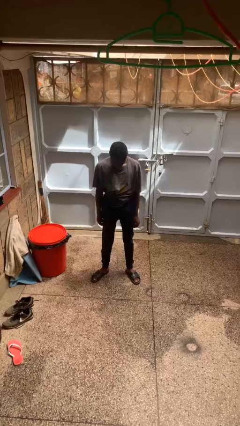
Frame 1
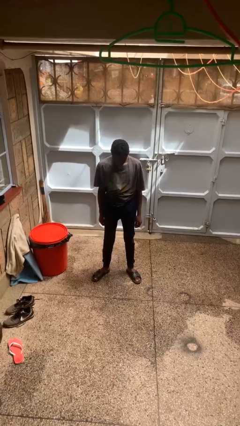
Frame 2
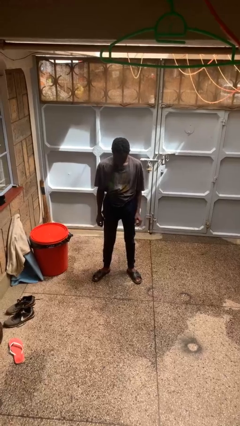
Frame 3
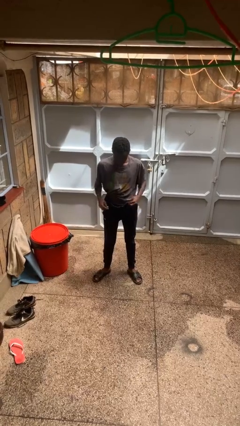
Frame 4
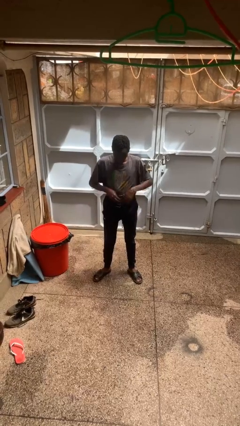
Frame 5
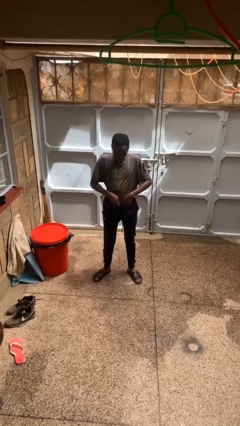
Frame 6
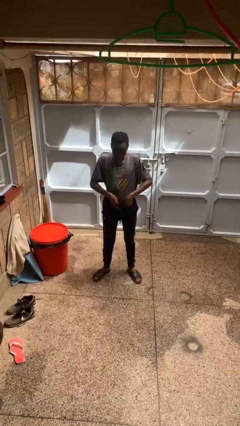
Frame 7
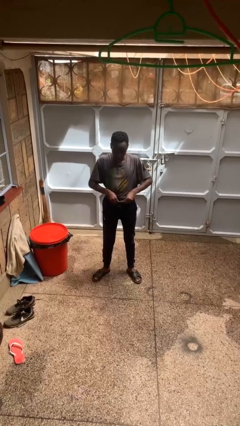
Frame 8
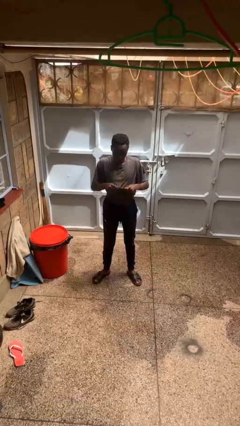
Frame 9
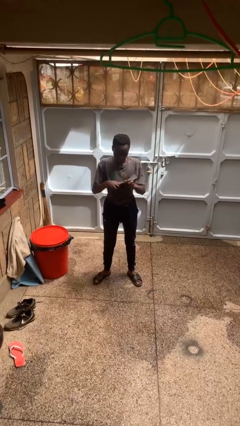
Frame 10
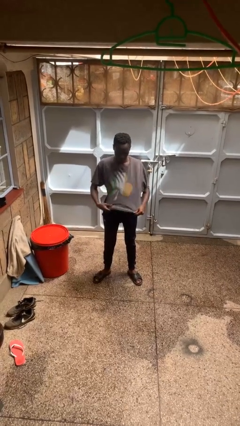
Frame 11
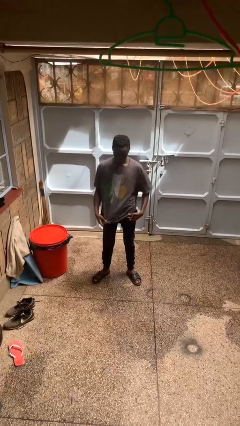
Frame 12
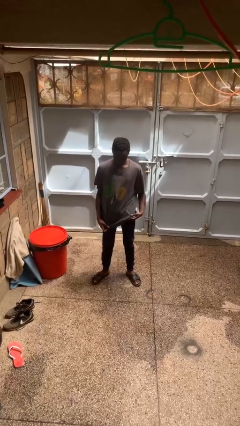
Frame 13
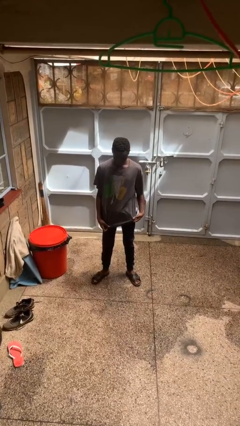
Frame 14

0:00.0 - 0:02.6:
person untucks shirt

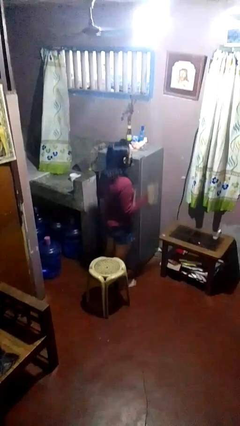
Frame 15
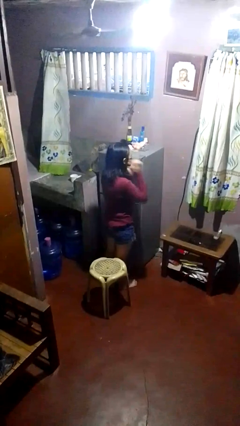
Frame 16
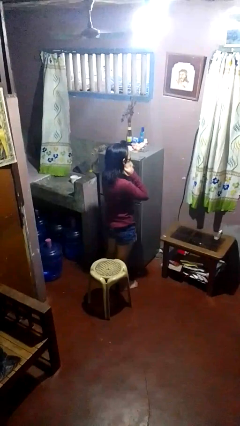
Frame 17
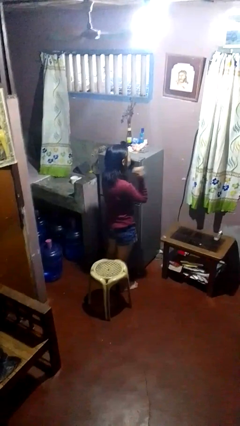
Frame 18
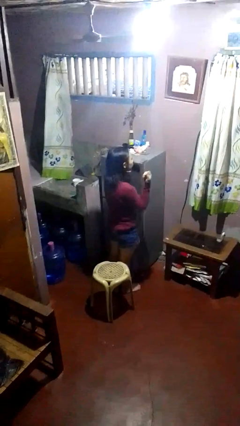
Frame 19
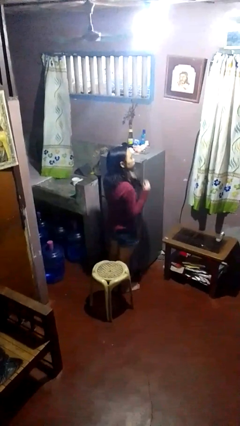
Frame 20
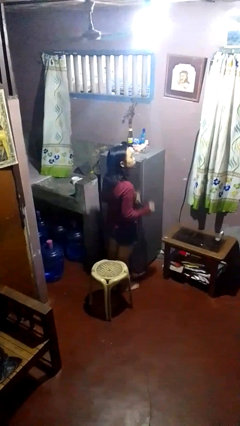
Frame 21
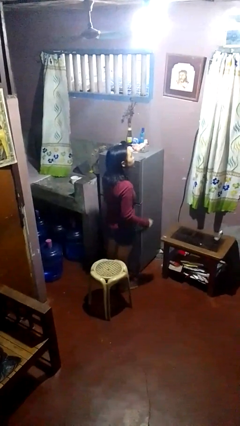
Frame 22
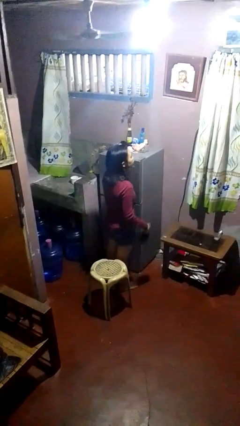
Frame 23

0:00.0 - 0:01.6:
person takes off facemask

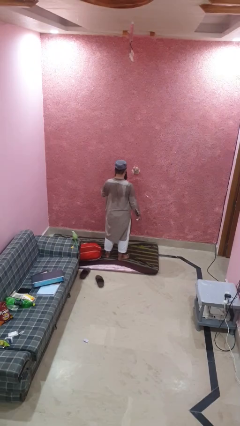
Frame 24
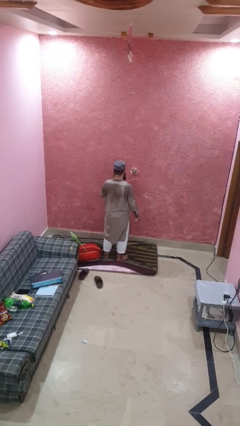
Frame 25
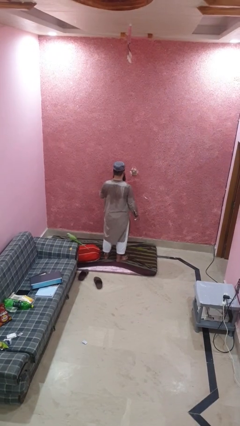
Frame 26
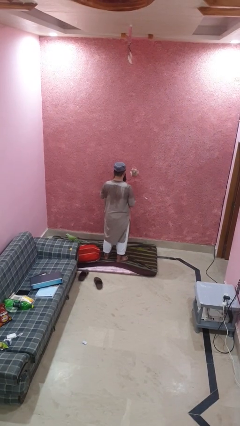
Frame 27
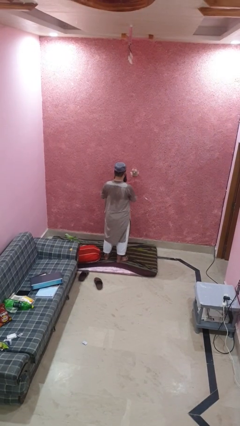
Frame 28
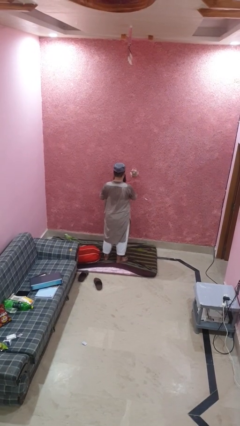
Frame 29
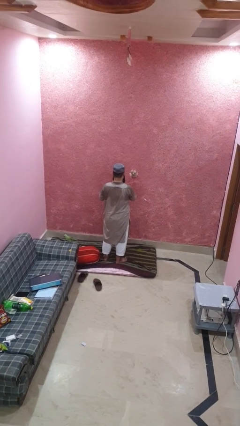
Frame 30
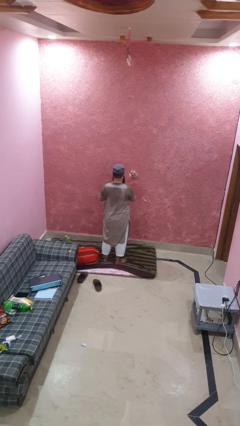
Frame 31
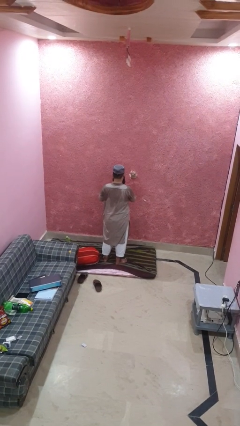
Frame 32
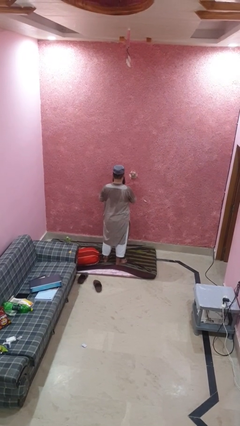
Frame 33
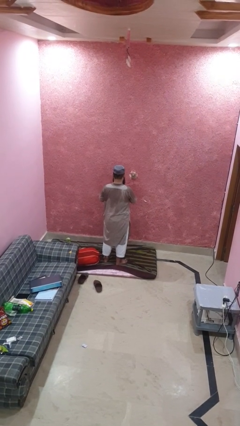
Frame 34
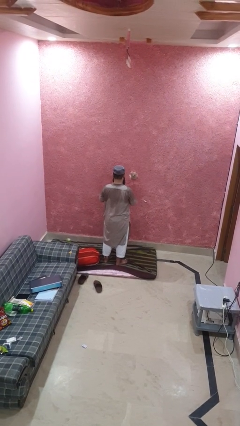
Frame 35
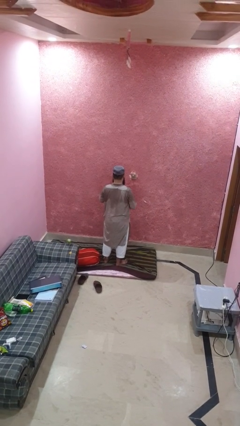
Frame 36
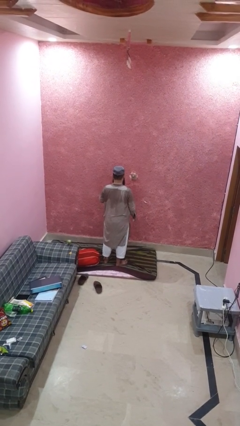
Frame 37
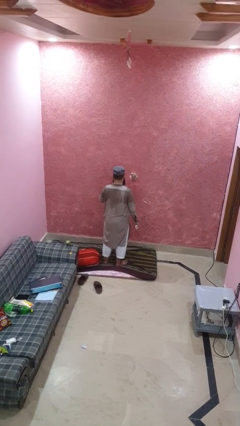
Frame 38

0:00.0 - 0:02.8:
person wipes mouth with napkin

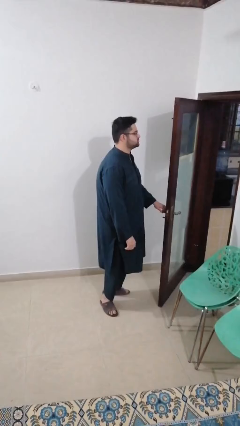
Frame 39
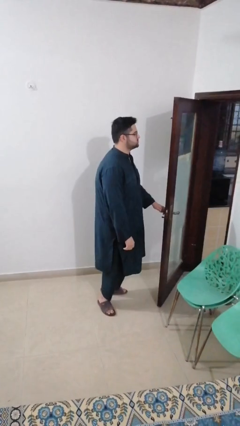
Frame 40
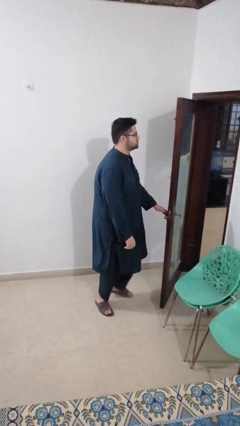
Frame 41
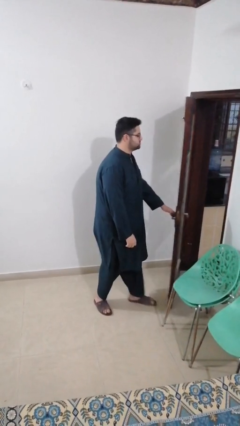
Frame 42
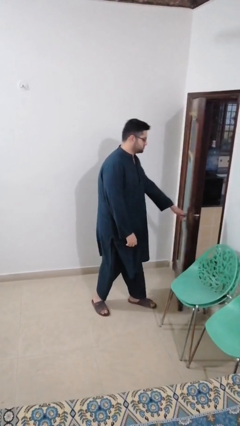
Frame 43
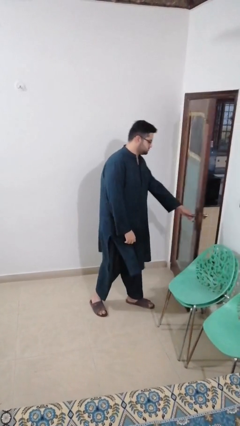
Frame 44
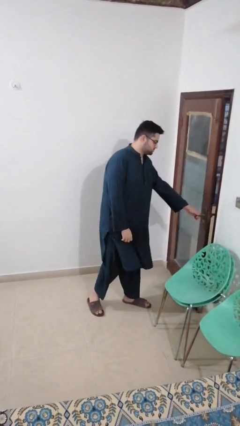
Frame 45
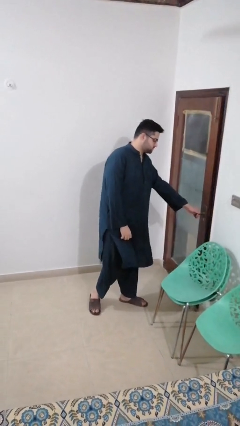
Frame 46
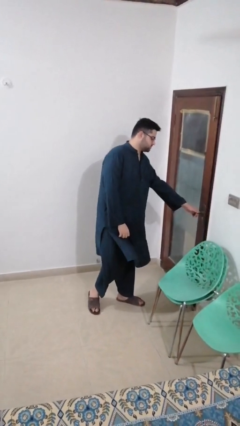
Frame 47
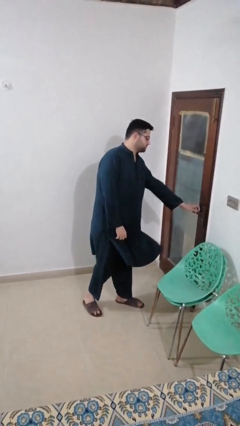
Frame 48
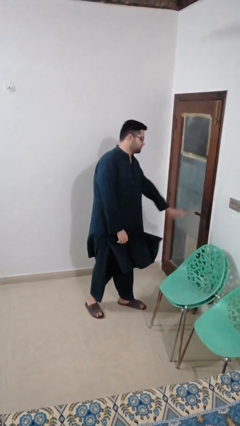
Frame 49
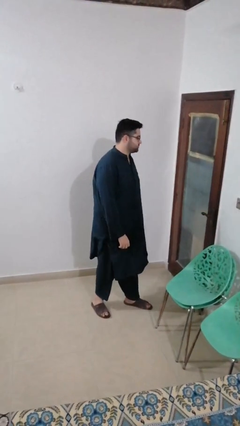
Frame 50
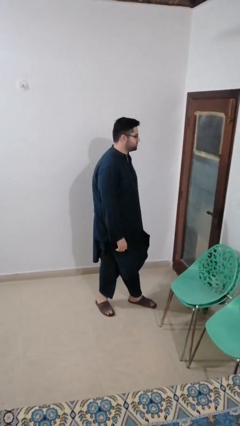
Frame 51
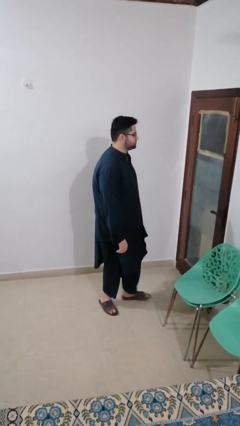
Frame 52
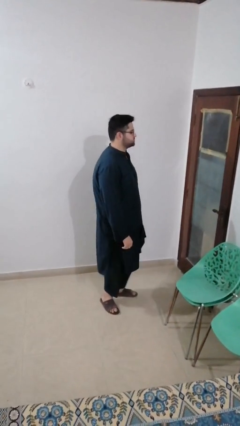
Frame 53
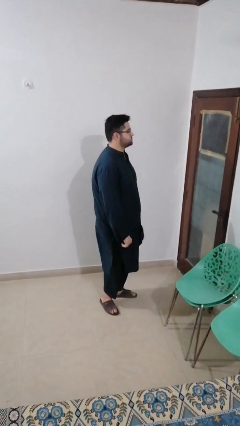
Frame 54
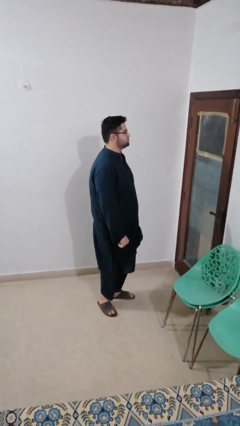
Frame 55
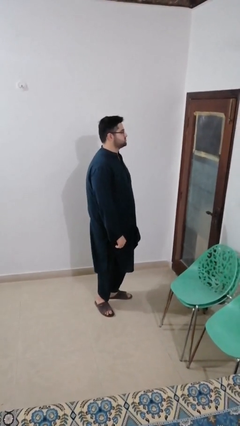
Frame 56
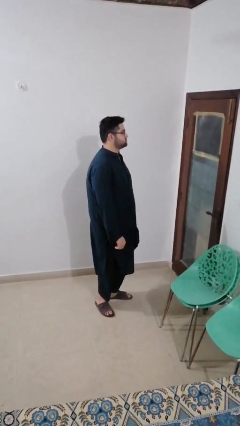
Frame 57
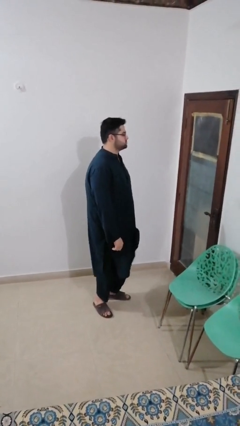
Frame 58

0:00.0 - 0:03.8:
person closes facility door

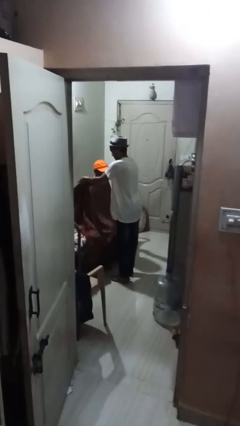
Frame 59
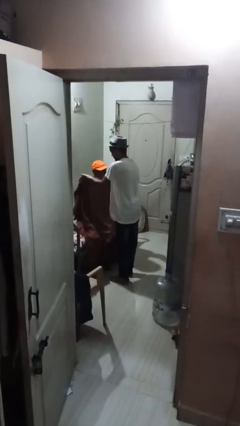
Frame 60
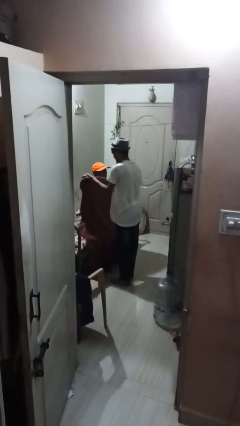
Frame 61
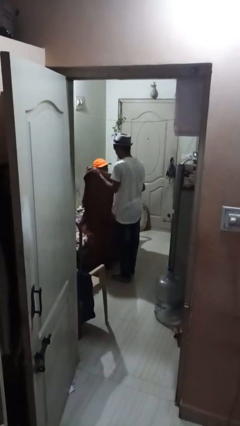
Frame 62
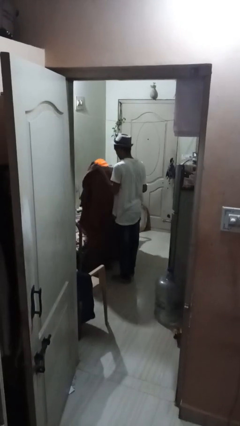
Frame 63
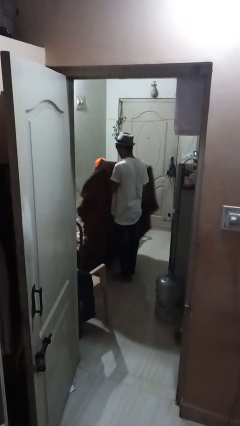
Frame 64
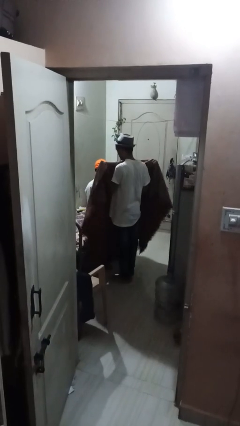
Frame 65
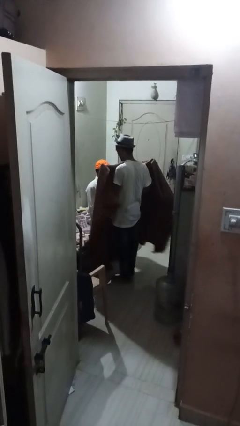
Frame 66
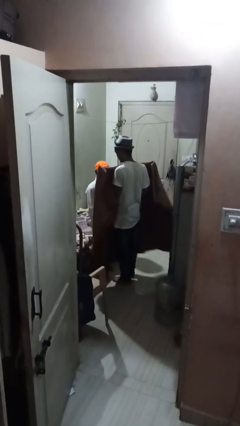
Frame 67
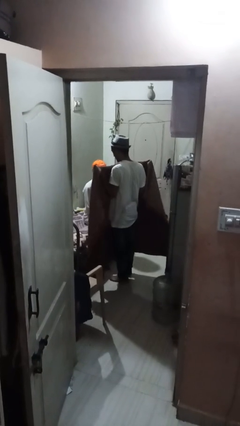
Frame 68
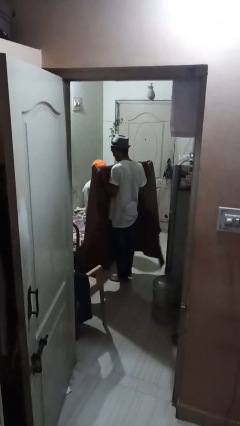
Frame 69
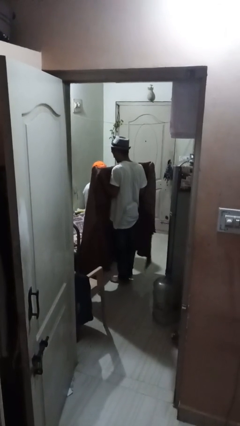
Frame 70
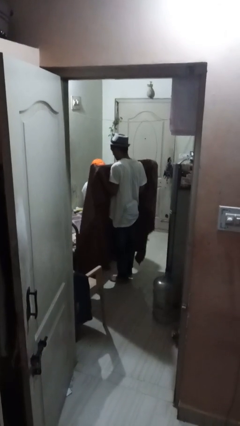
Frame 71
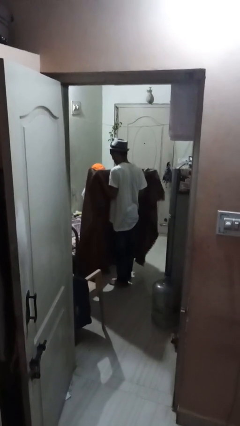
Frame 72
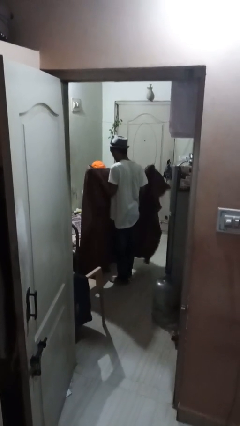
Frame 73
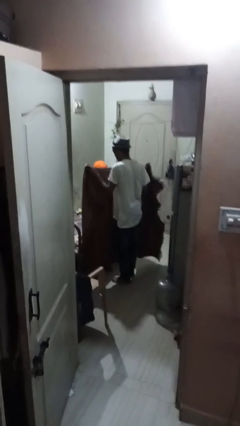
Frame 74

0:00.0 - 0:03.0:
person uncovers friend with blanket

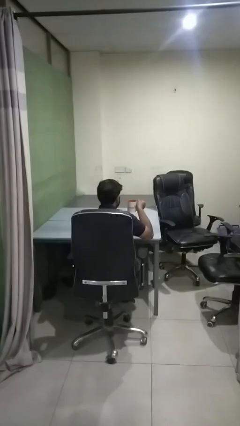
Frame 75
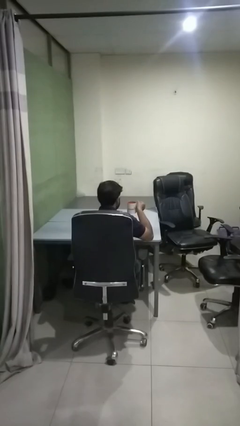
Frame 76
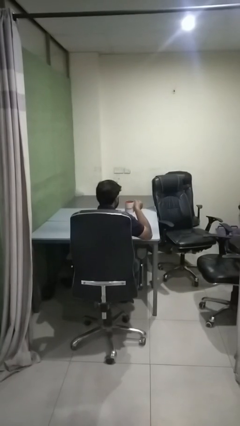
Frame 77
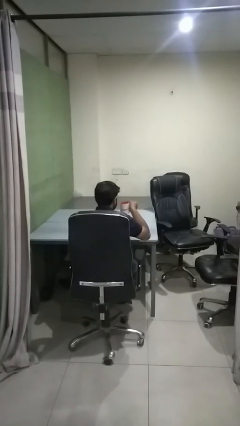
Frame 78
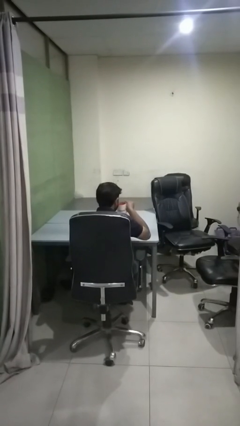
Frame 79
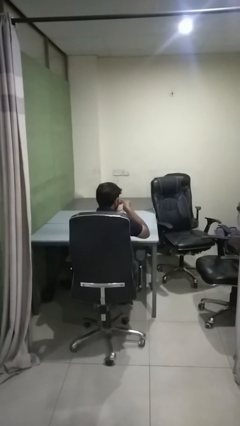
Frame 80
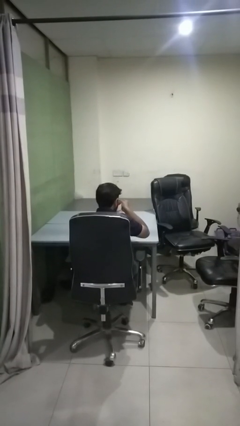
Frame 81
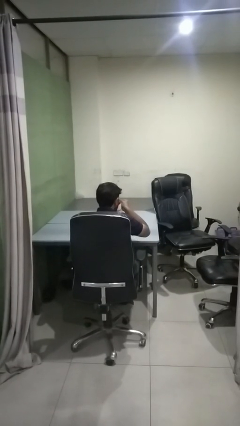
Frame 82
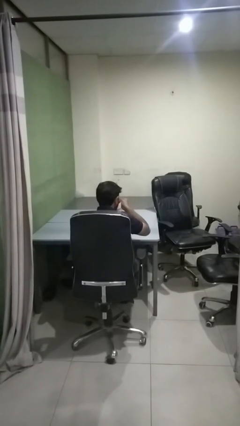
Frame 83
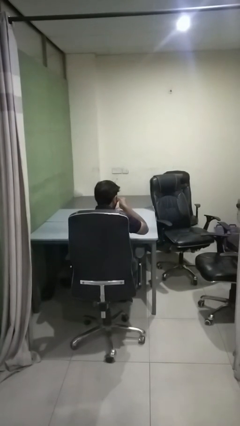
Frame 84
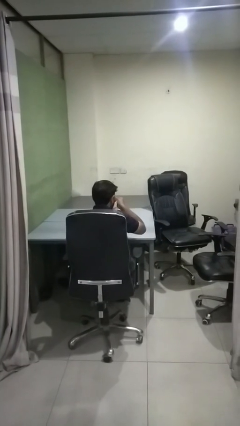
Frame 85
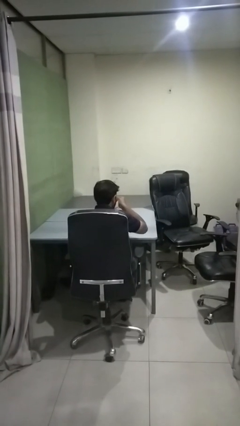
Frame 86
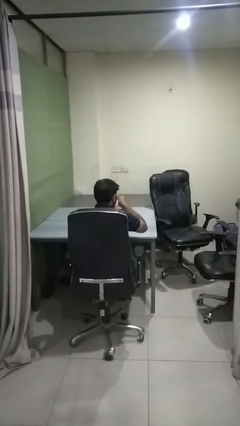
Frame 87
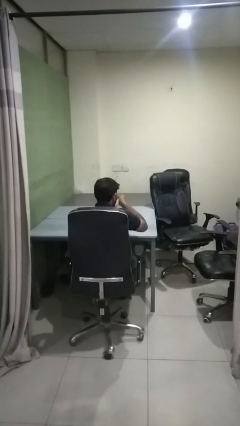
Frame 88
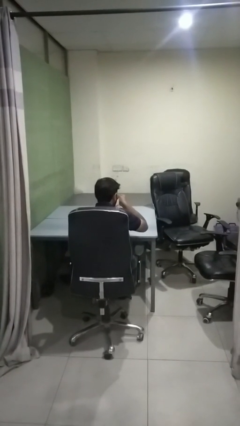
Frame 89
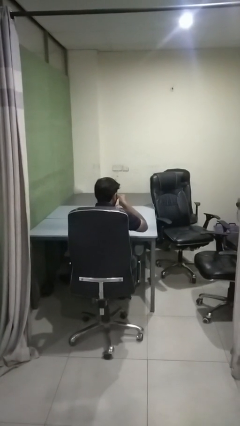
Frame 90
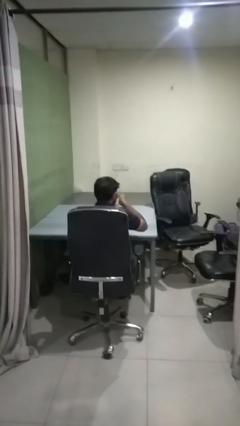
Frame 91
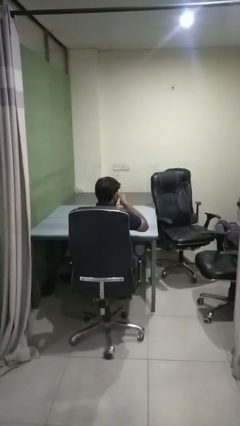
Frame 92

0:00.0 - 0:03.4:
person drinks from mug

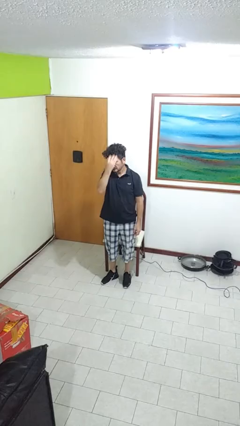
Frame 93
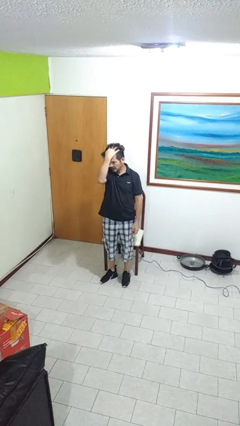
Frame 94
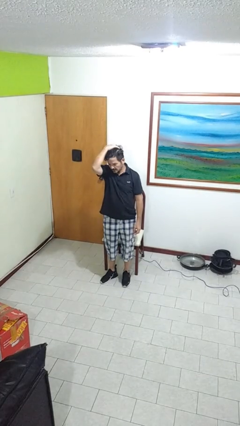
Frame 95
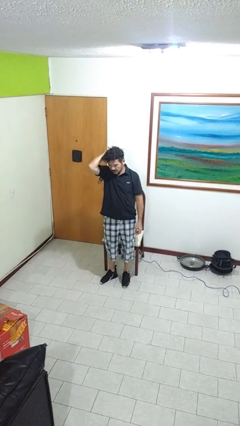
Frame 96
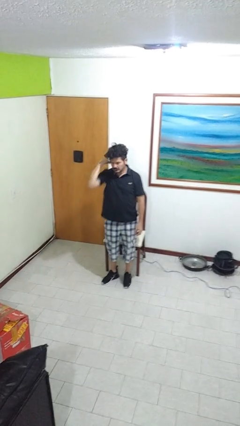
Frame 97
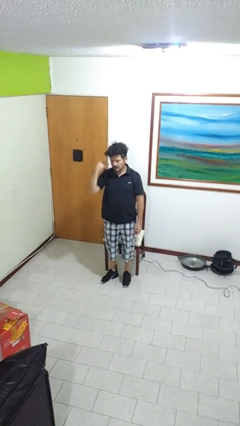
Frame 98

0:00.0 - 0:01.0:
person strokes hair
